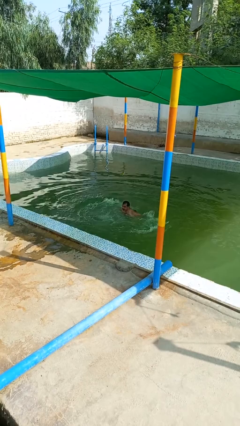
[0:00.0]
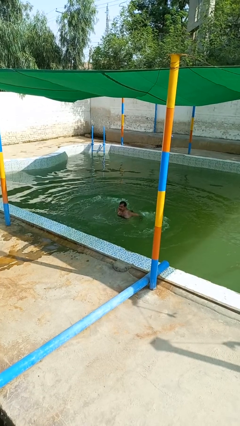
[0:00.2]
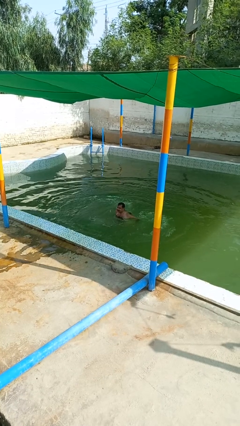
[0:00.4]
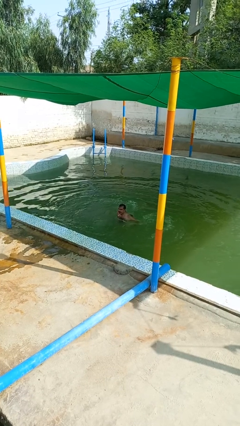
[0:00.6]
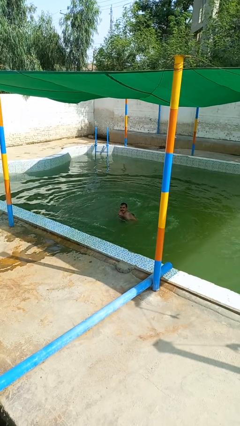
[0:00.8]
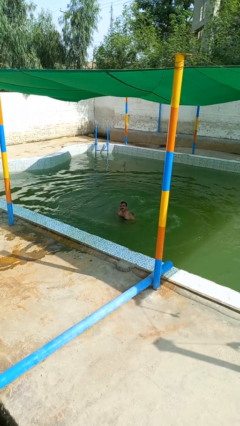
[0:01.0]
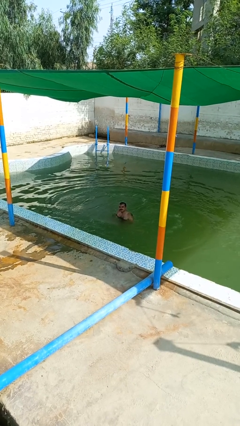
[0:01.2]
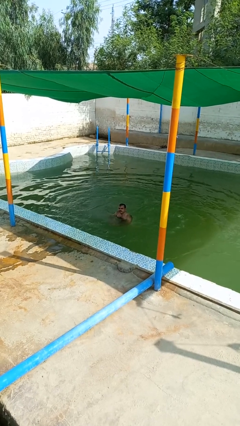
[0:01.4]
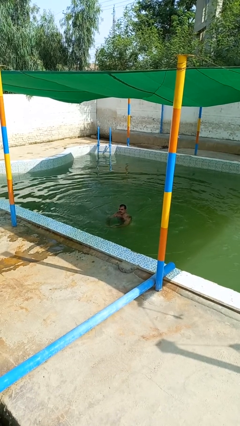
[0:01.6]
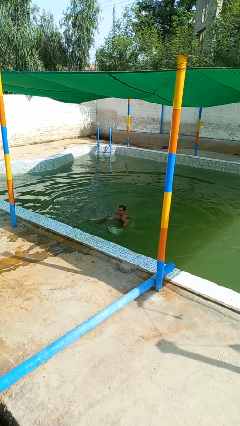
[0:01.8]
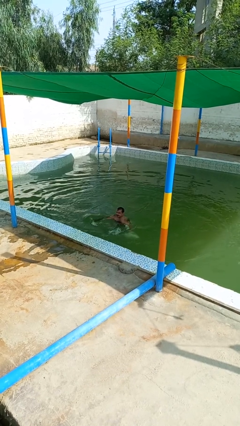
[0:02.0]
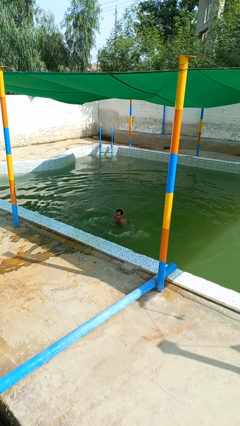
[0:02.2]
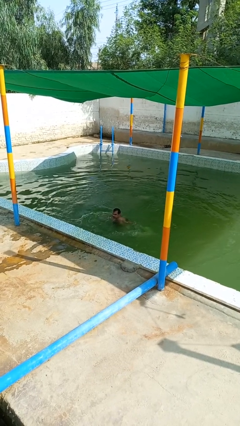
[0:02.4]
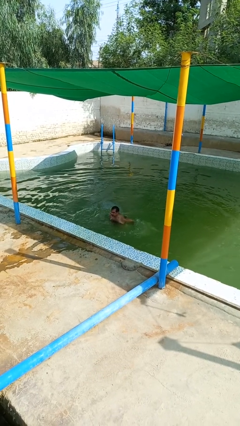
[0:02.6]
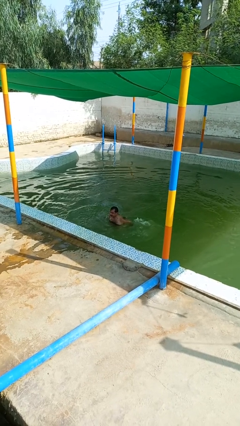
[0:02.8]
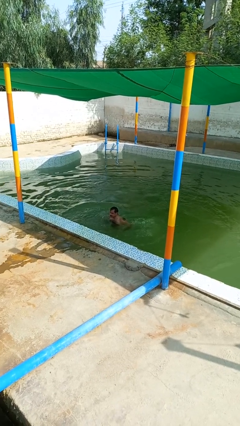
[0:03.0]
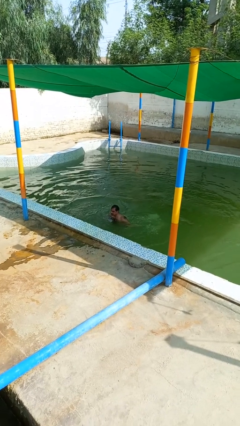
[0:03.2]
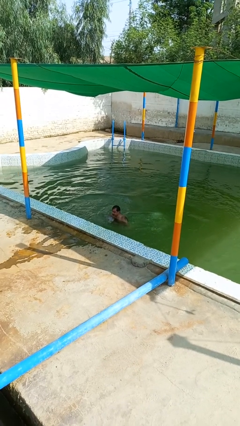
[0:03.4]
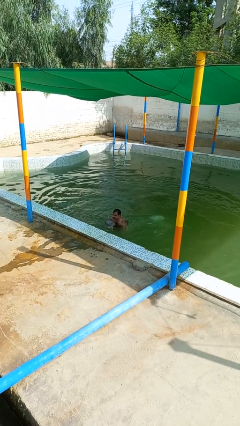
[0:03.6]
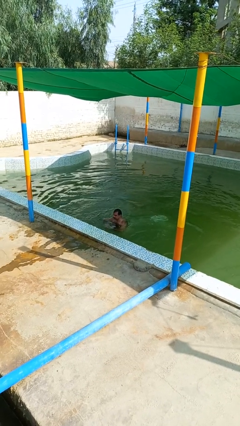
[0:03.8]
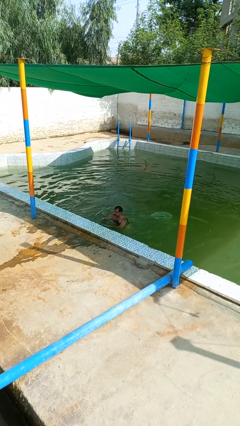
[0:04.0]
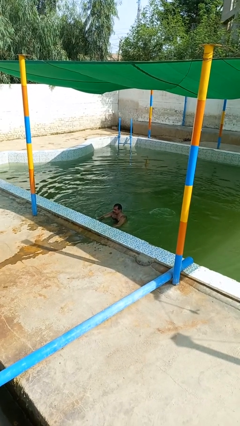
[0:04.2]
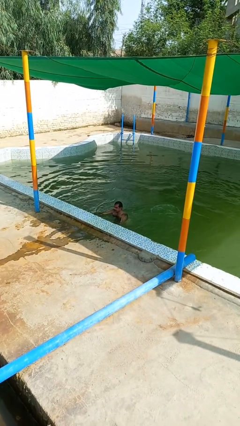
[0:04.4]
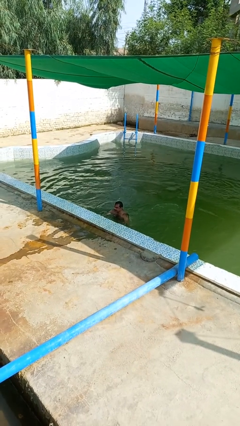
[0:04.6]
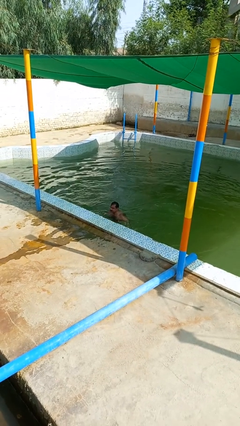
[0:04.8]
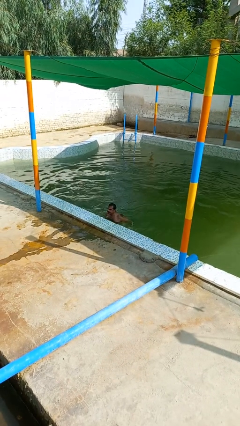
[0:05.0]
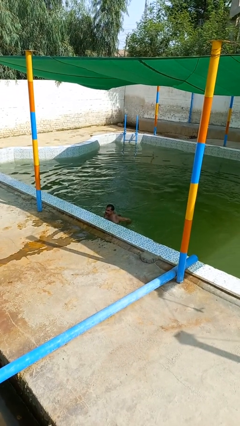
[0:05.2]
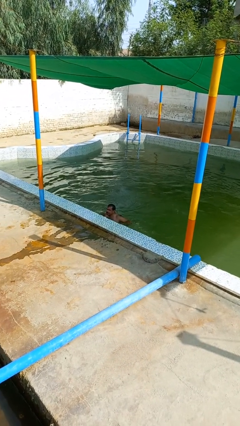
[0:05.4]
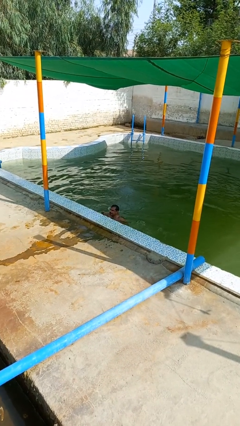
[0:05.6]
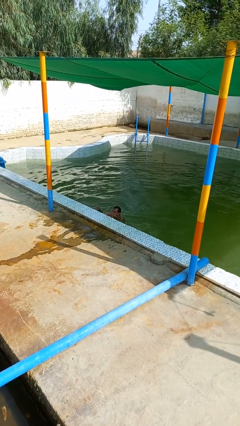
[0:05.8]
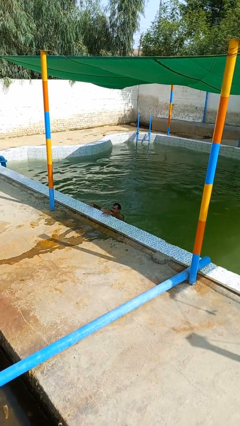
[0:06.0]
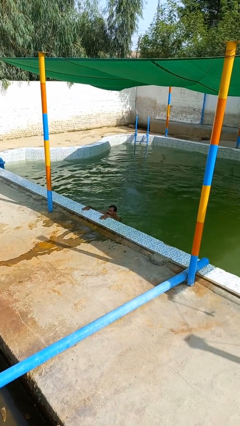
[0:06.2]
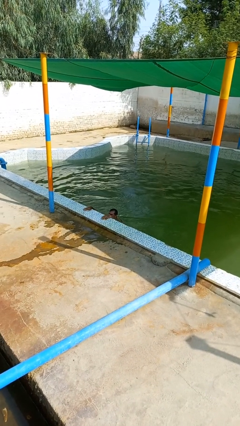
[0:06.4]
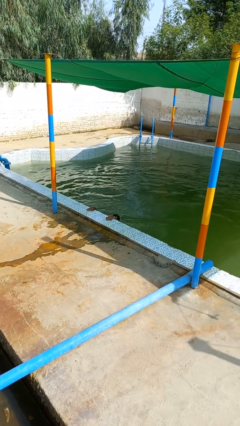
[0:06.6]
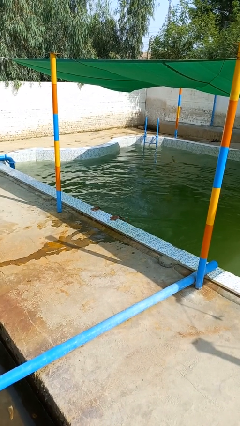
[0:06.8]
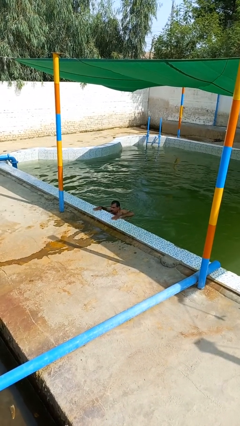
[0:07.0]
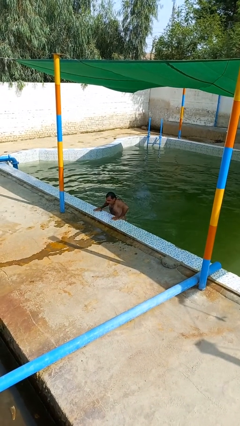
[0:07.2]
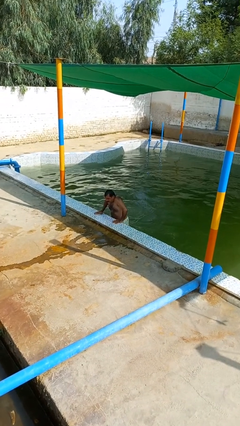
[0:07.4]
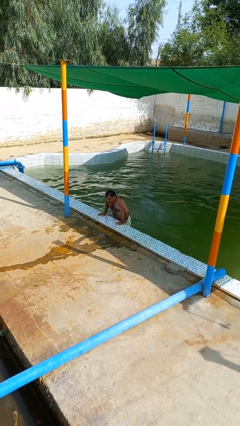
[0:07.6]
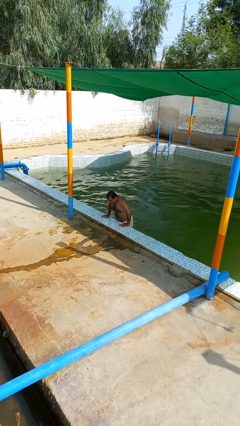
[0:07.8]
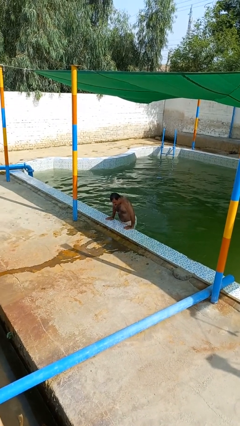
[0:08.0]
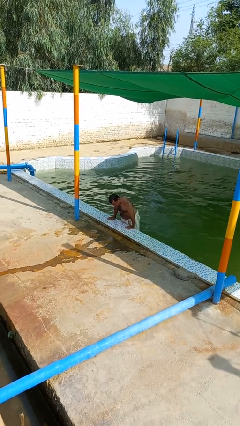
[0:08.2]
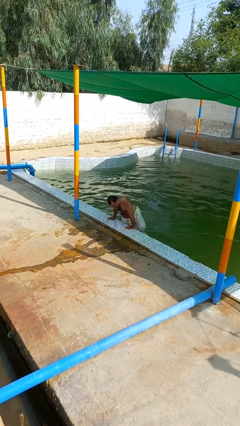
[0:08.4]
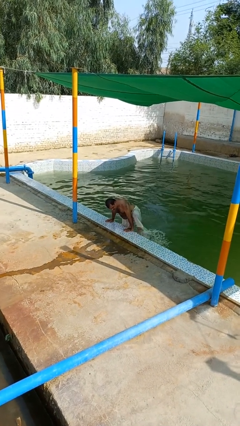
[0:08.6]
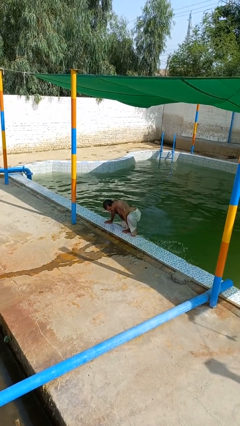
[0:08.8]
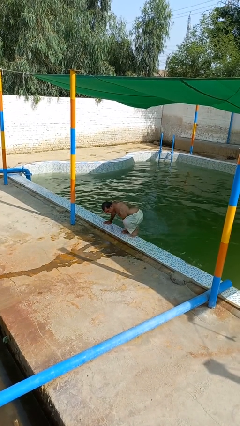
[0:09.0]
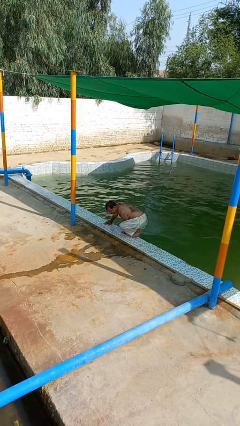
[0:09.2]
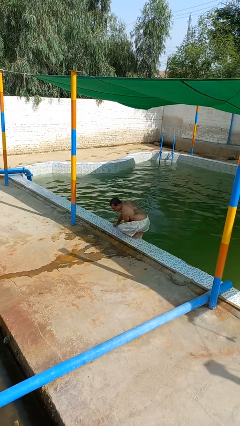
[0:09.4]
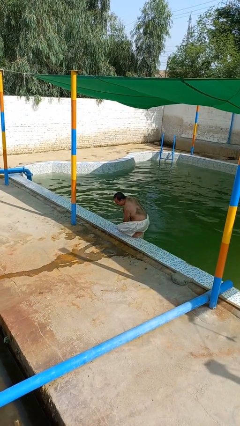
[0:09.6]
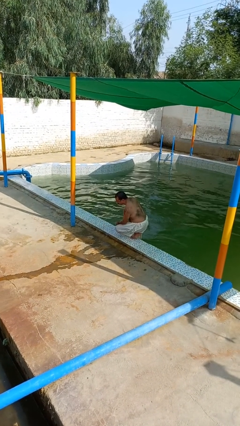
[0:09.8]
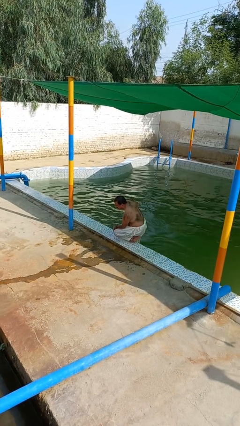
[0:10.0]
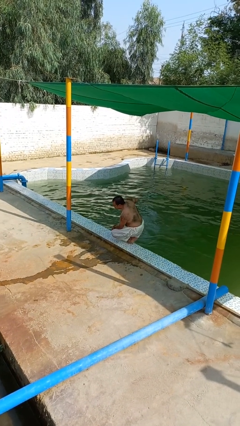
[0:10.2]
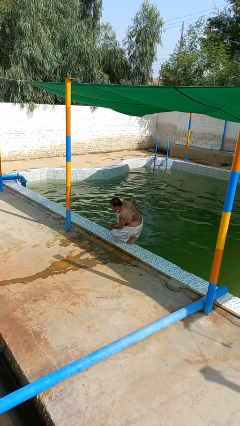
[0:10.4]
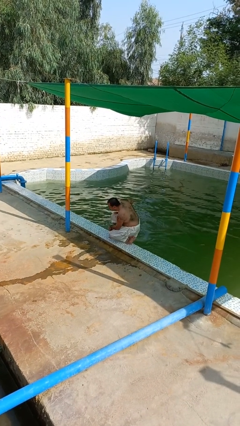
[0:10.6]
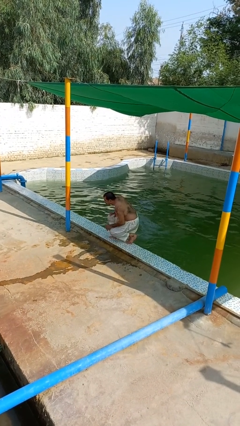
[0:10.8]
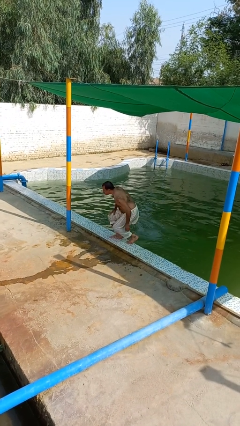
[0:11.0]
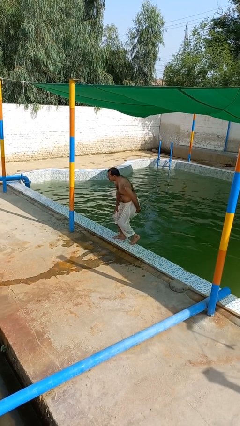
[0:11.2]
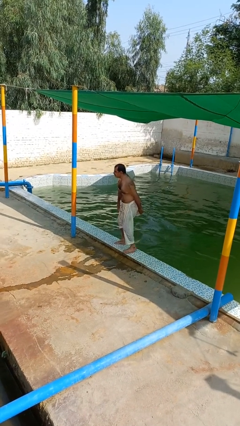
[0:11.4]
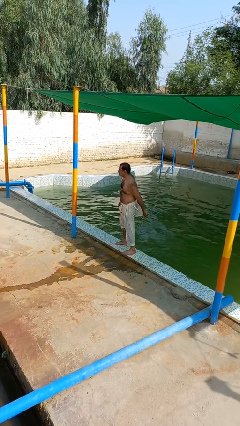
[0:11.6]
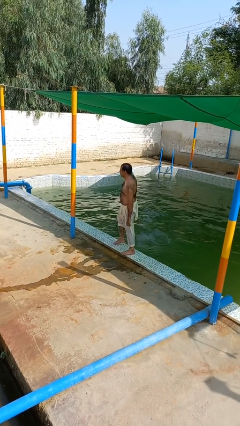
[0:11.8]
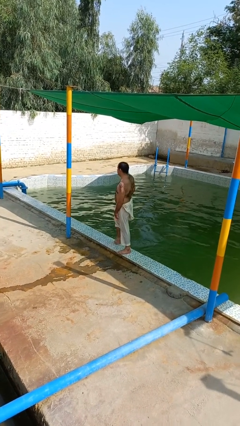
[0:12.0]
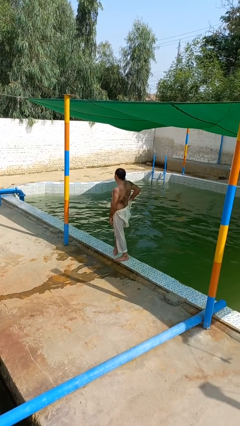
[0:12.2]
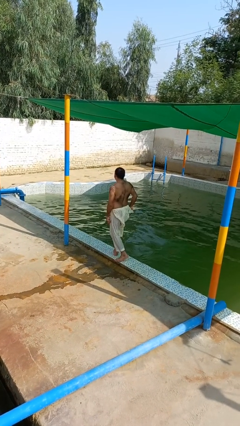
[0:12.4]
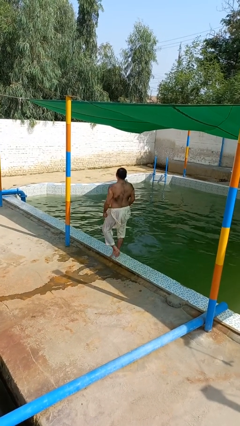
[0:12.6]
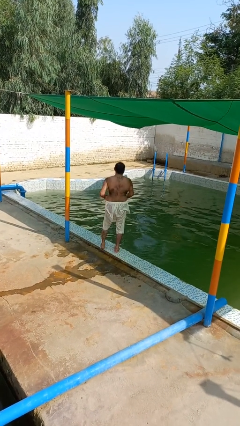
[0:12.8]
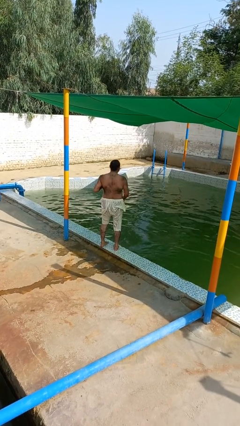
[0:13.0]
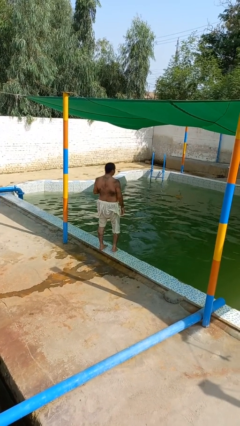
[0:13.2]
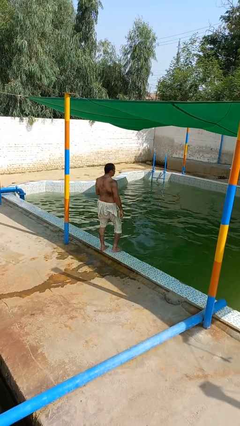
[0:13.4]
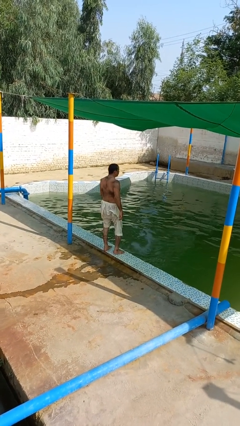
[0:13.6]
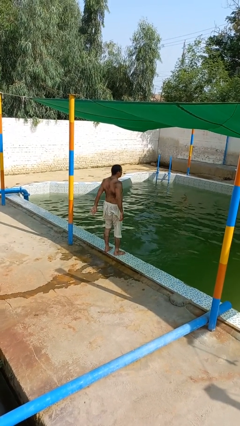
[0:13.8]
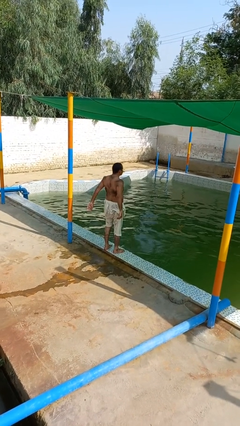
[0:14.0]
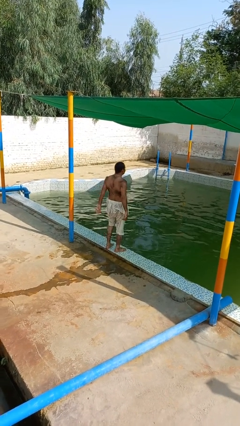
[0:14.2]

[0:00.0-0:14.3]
person exits pool

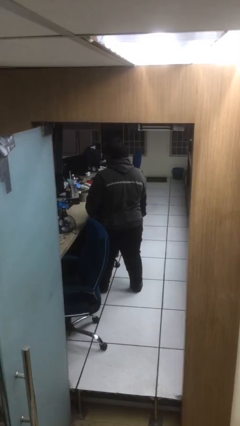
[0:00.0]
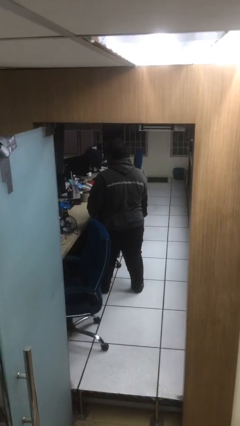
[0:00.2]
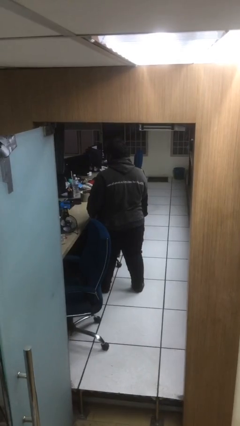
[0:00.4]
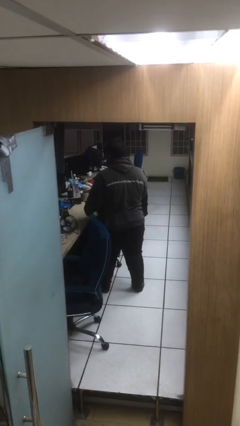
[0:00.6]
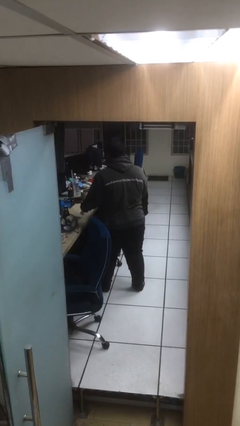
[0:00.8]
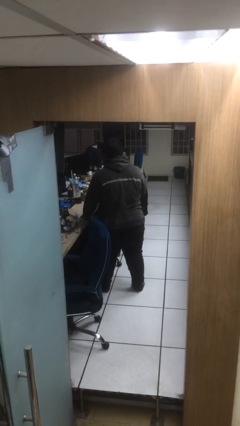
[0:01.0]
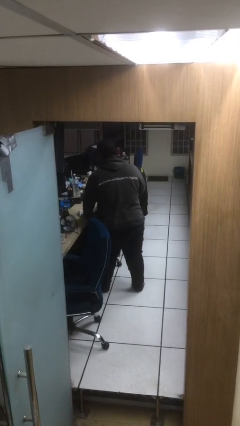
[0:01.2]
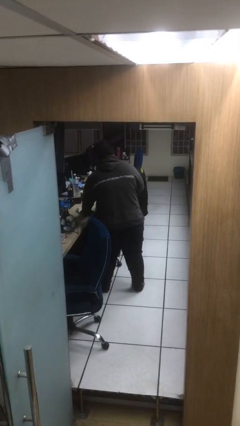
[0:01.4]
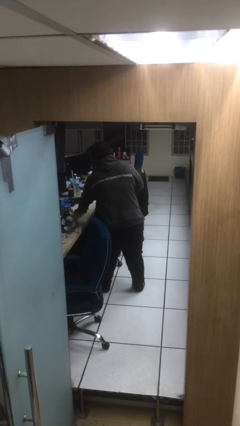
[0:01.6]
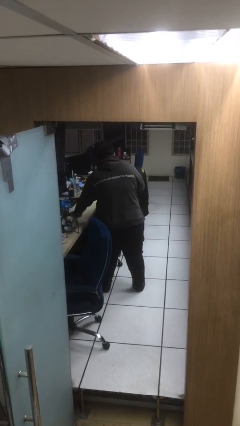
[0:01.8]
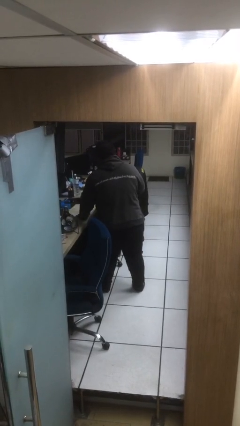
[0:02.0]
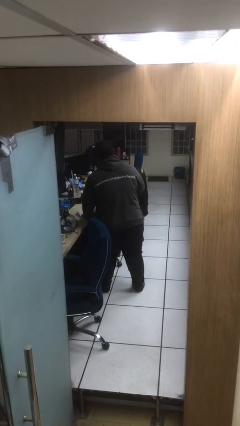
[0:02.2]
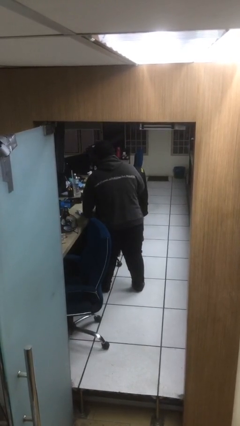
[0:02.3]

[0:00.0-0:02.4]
person cleans table with rag

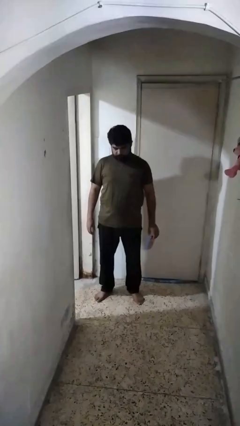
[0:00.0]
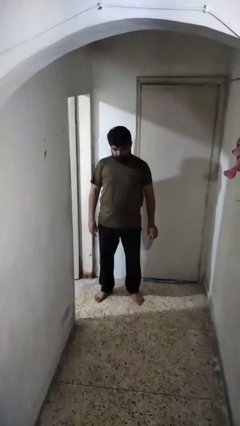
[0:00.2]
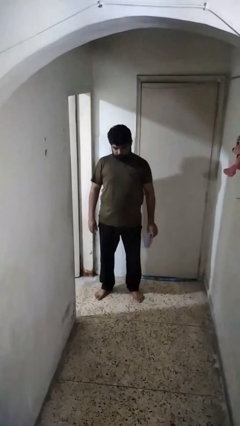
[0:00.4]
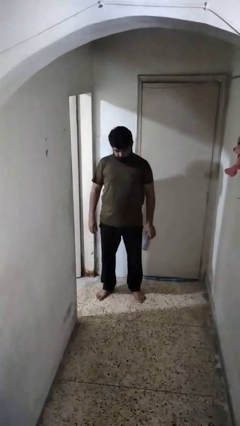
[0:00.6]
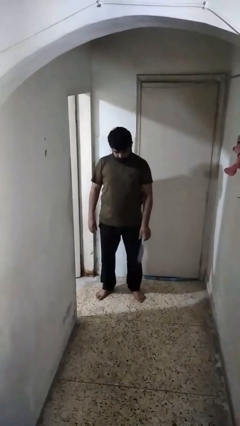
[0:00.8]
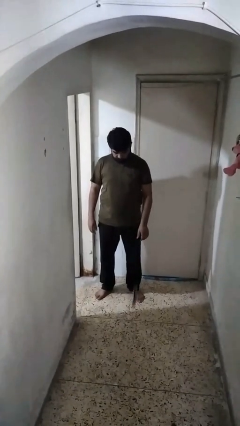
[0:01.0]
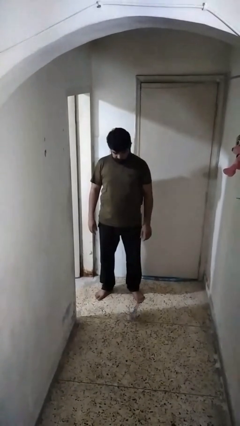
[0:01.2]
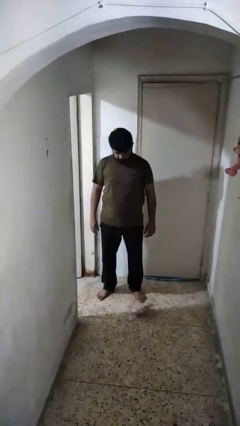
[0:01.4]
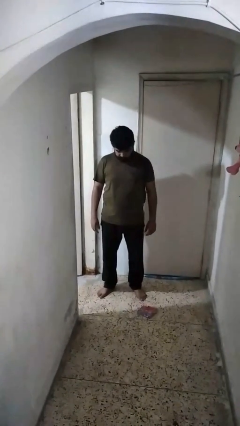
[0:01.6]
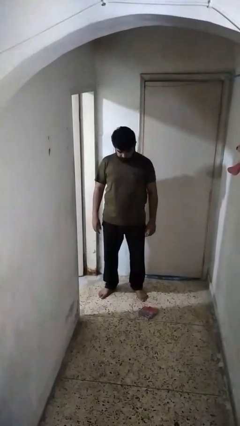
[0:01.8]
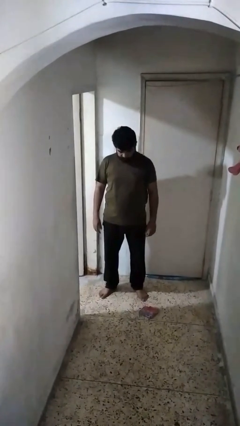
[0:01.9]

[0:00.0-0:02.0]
person throws object to ground
